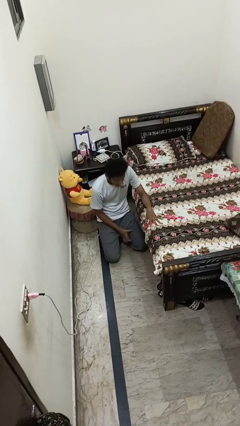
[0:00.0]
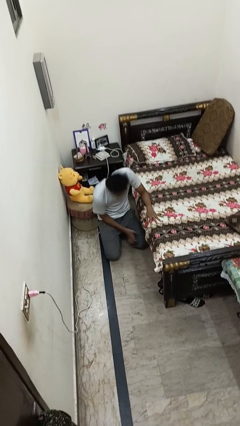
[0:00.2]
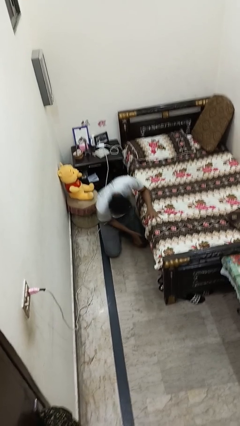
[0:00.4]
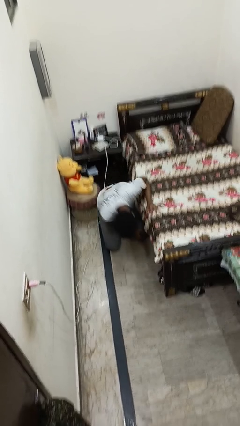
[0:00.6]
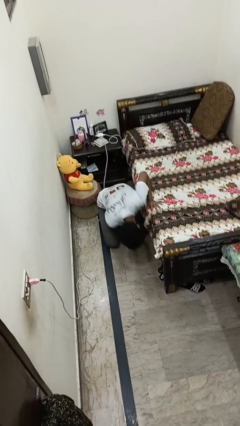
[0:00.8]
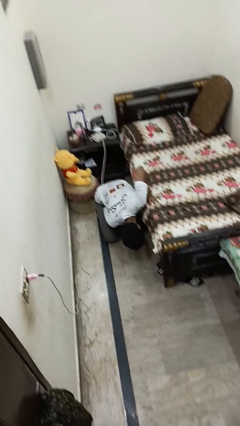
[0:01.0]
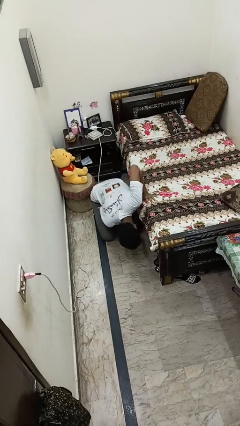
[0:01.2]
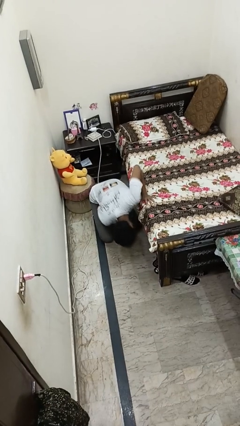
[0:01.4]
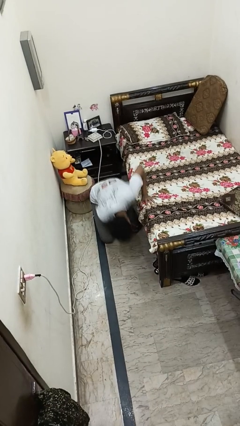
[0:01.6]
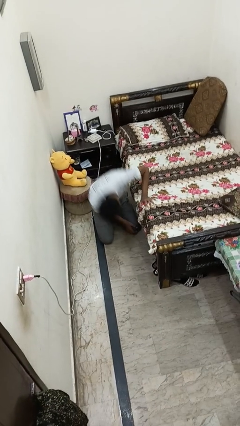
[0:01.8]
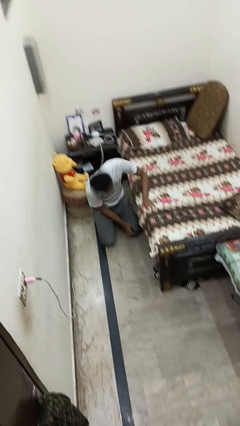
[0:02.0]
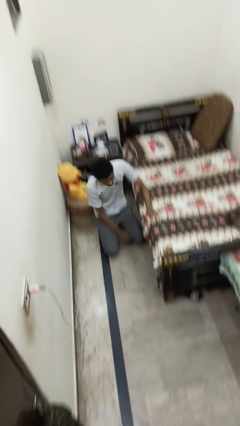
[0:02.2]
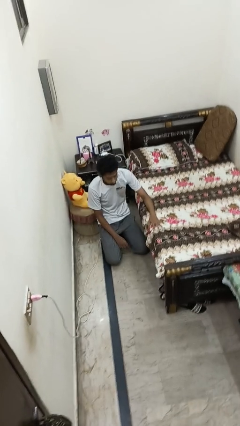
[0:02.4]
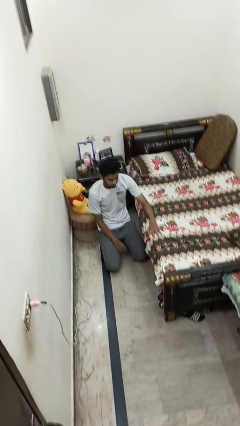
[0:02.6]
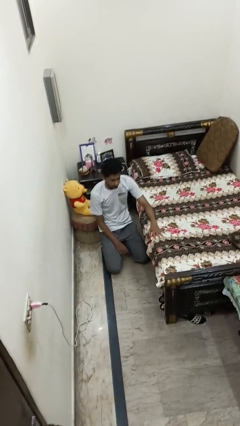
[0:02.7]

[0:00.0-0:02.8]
person searches under bed

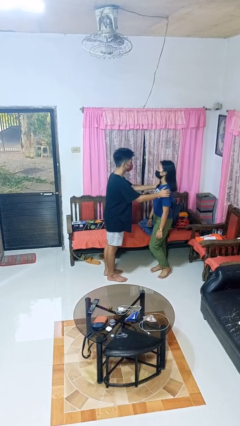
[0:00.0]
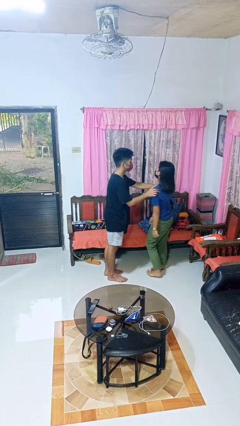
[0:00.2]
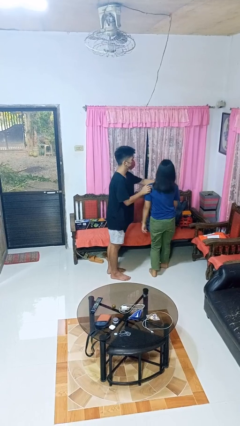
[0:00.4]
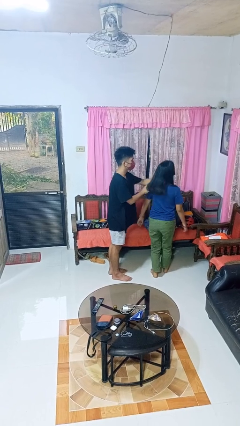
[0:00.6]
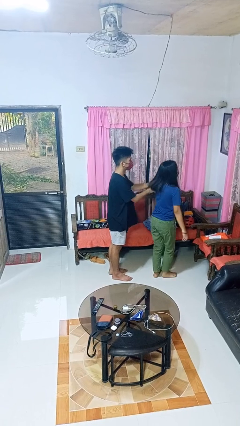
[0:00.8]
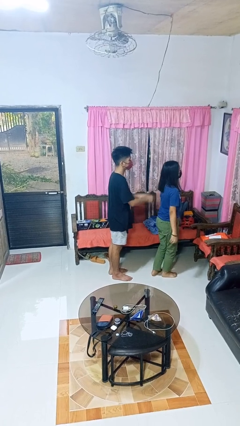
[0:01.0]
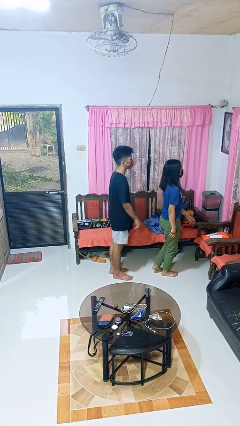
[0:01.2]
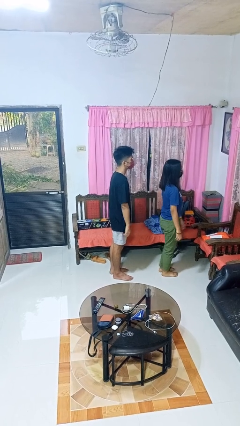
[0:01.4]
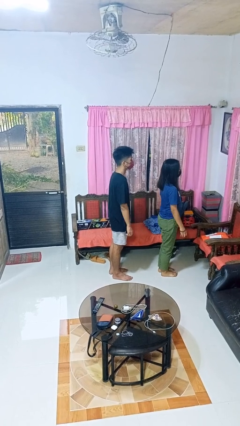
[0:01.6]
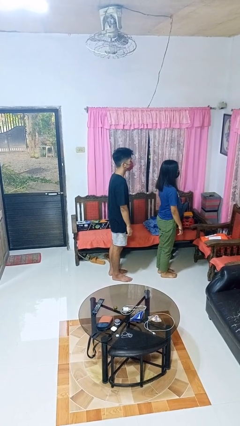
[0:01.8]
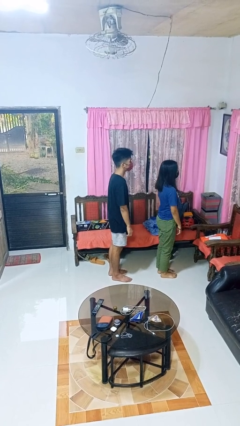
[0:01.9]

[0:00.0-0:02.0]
person spins person around

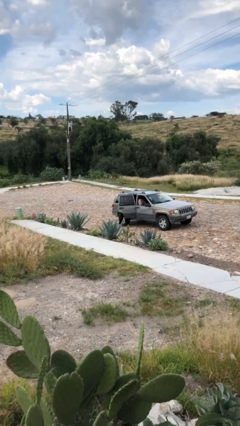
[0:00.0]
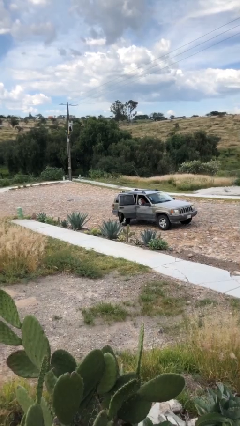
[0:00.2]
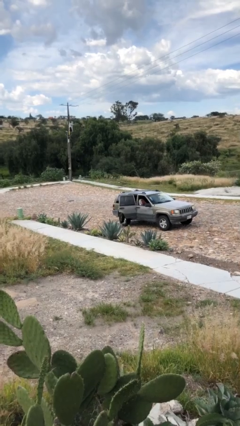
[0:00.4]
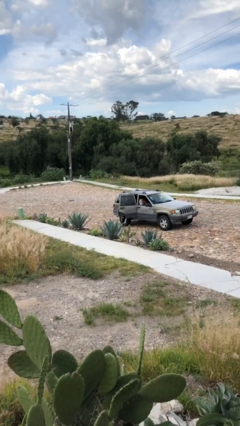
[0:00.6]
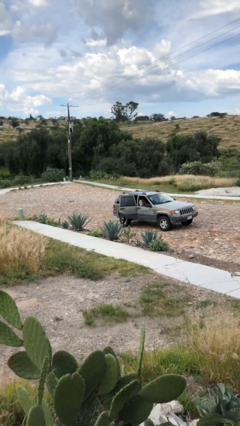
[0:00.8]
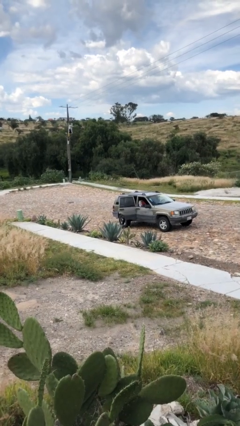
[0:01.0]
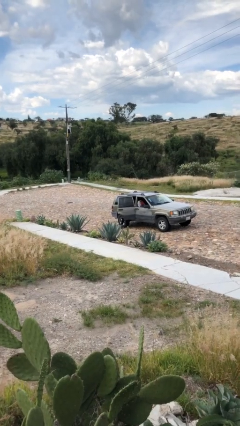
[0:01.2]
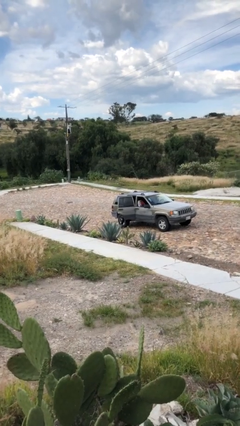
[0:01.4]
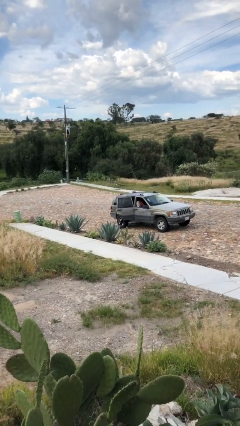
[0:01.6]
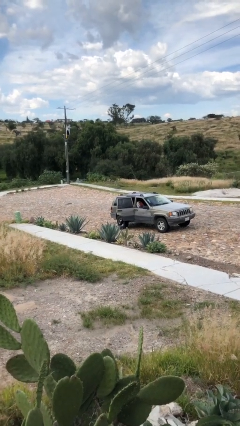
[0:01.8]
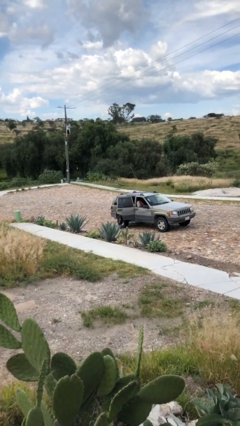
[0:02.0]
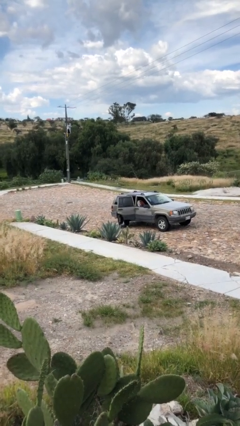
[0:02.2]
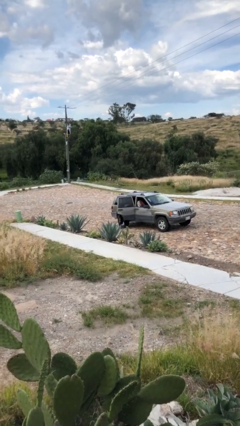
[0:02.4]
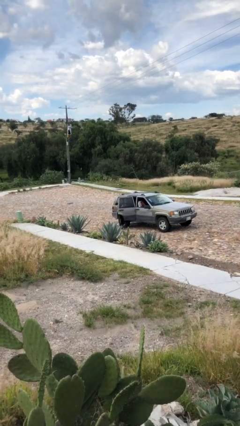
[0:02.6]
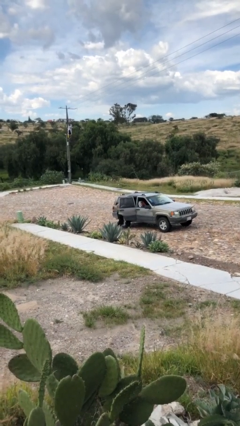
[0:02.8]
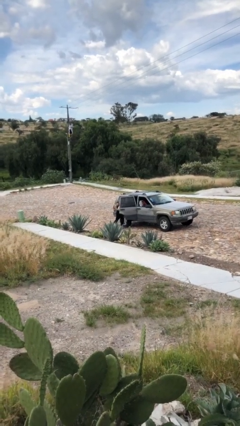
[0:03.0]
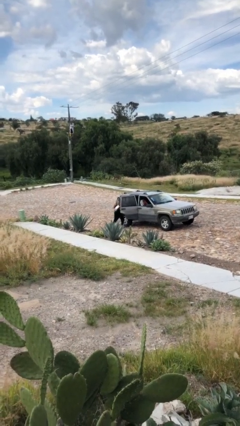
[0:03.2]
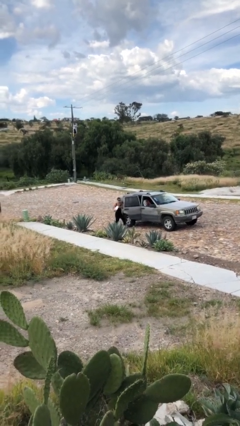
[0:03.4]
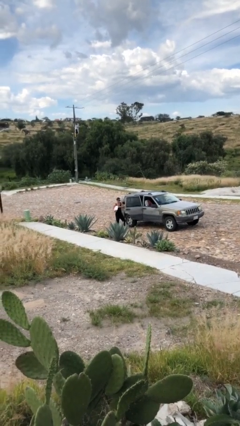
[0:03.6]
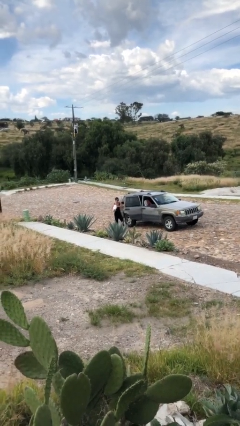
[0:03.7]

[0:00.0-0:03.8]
person unloads car

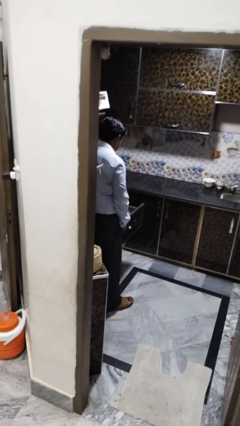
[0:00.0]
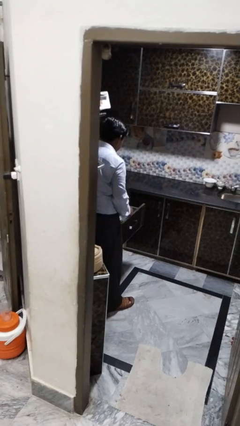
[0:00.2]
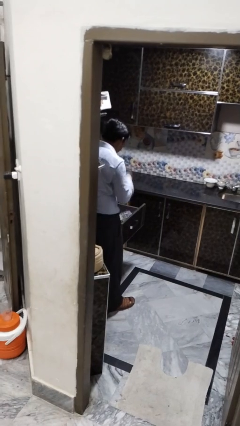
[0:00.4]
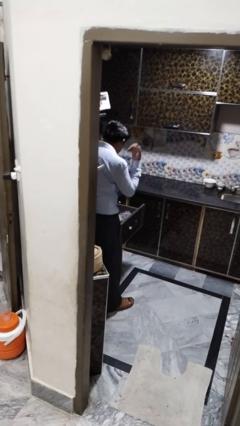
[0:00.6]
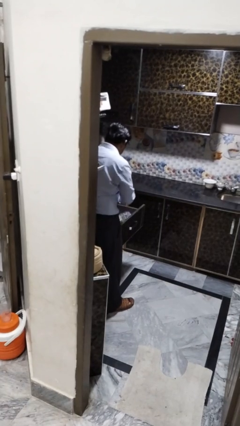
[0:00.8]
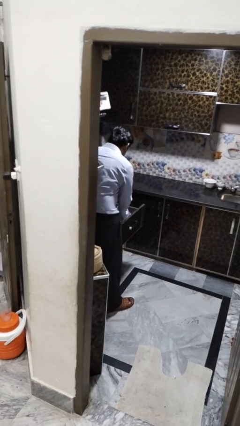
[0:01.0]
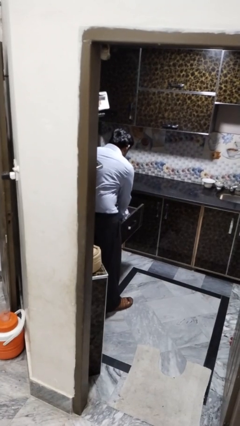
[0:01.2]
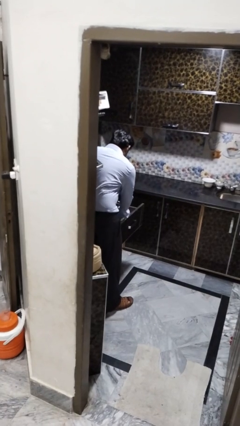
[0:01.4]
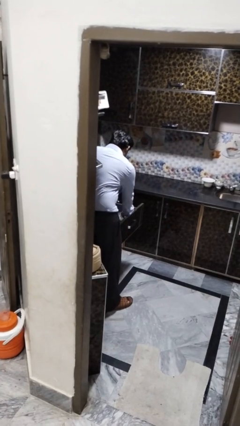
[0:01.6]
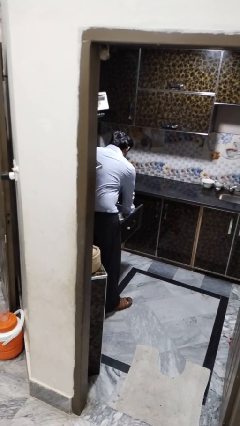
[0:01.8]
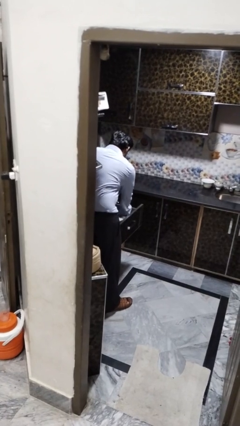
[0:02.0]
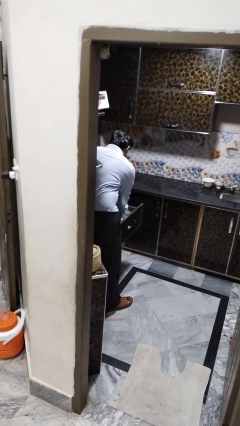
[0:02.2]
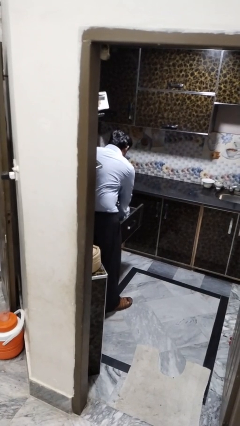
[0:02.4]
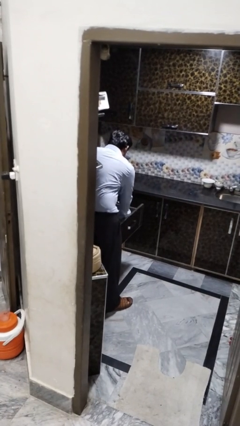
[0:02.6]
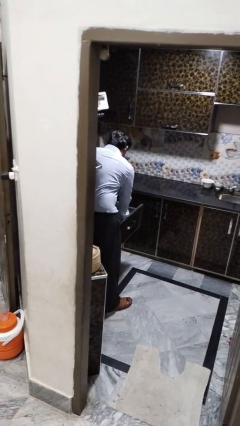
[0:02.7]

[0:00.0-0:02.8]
person searches in kitchen drawer

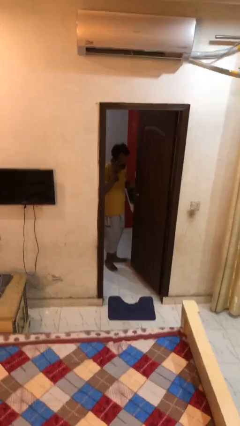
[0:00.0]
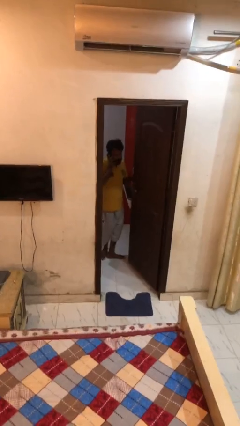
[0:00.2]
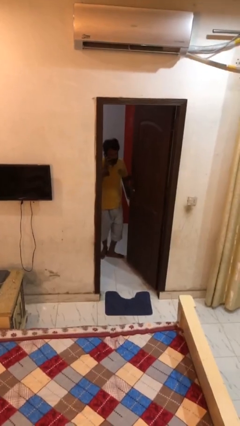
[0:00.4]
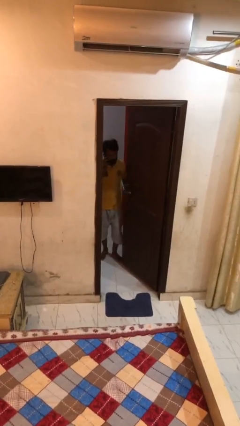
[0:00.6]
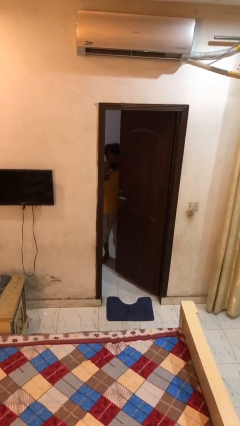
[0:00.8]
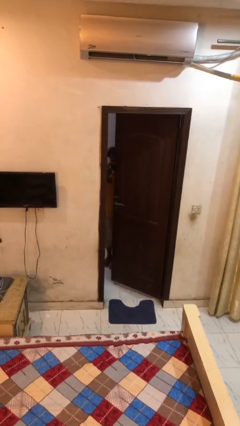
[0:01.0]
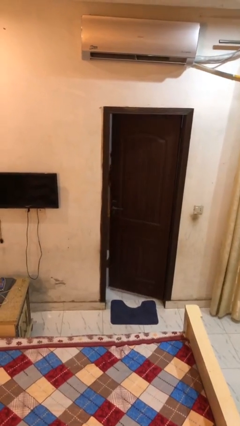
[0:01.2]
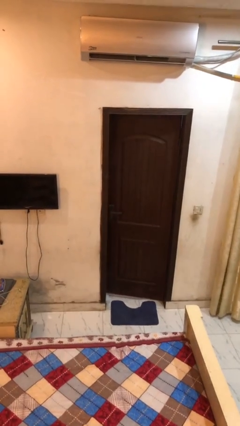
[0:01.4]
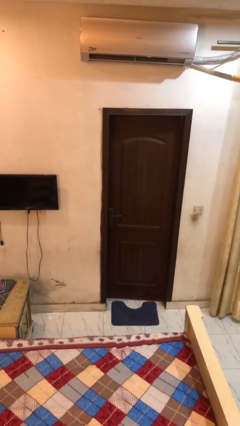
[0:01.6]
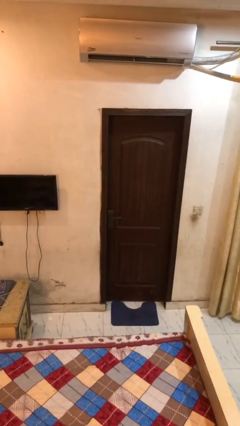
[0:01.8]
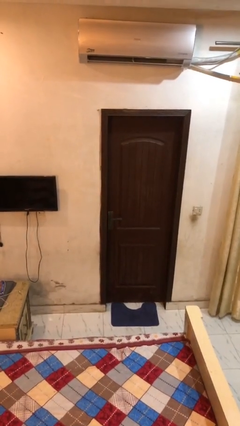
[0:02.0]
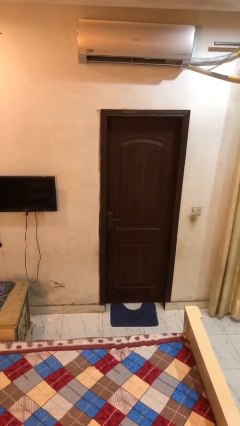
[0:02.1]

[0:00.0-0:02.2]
person closes facility door

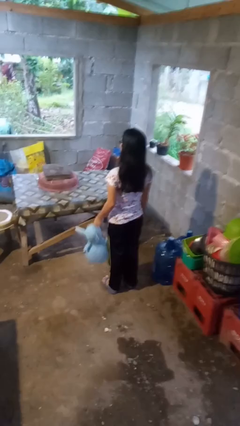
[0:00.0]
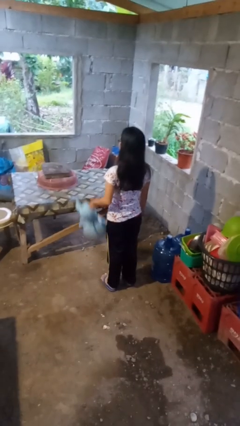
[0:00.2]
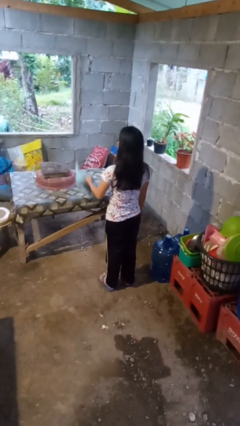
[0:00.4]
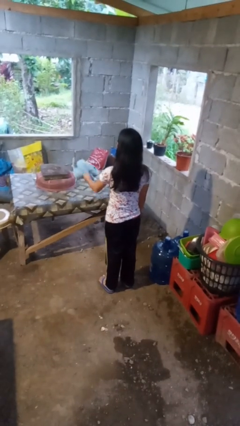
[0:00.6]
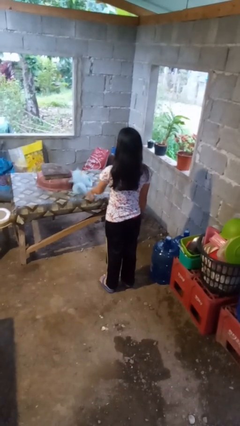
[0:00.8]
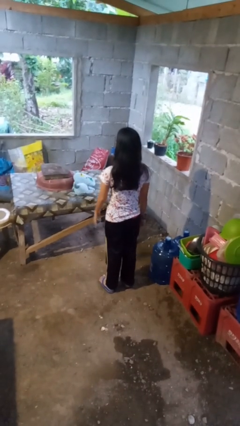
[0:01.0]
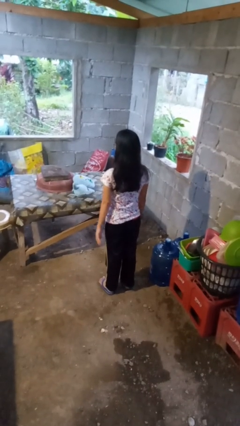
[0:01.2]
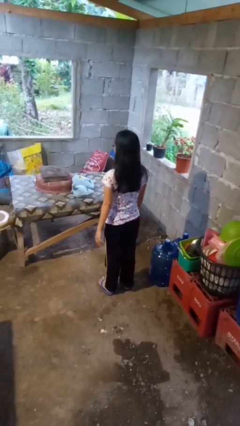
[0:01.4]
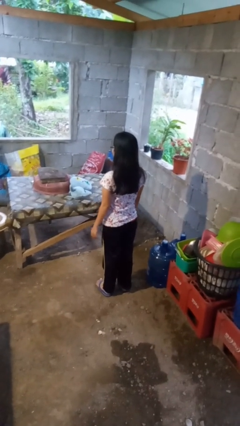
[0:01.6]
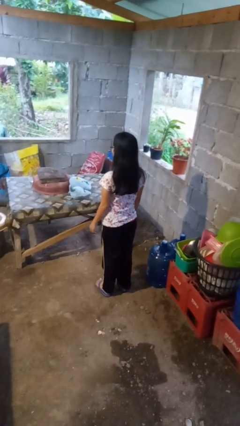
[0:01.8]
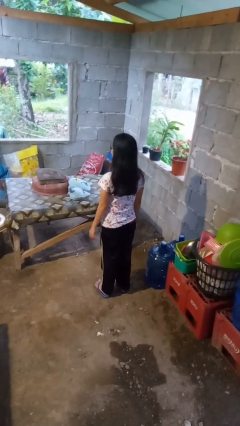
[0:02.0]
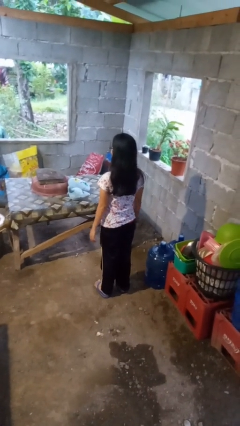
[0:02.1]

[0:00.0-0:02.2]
person throws object on table

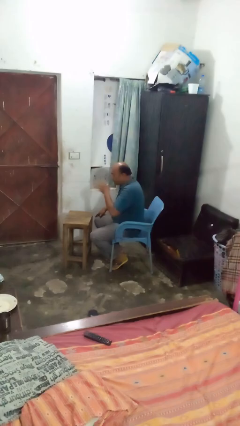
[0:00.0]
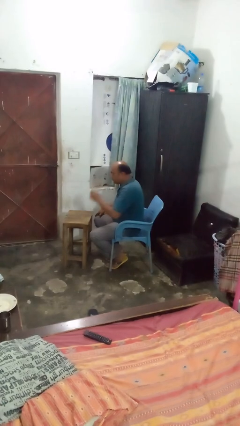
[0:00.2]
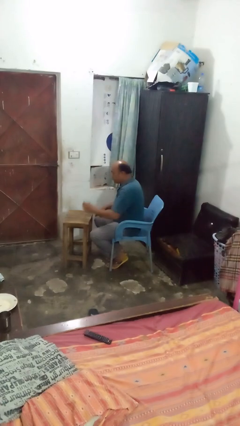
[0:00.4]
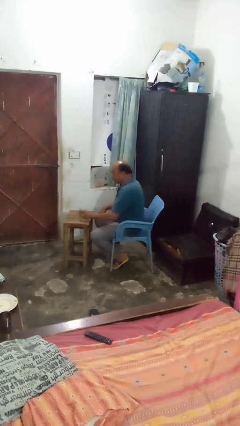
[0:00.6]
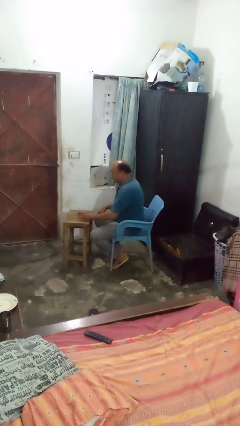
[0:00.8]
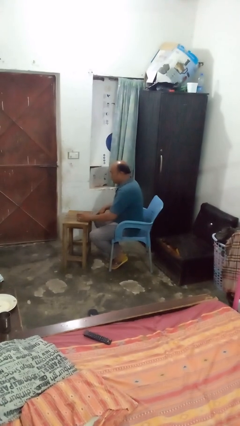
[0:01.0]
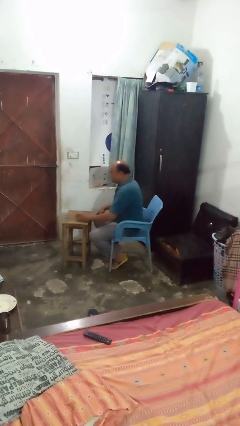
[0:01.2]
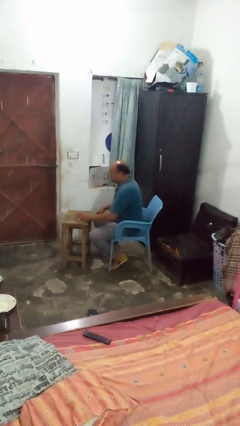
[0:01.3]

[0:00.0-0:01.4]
person puts down object on table
